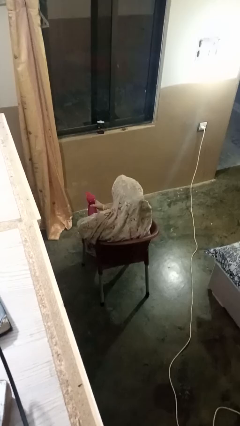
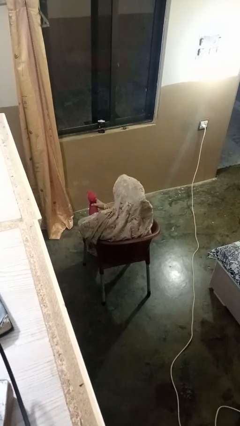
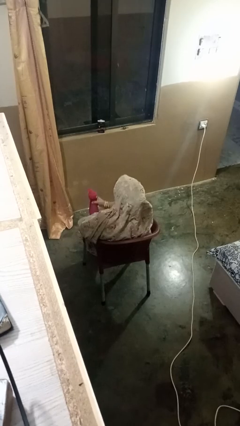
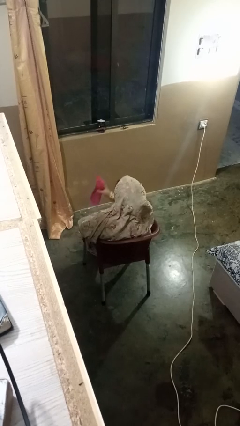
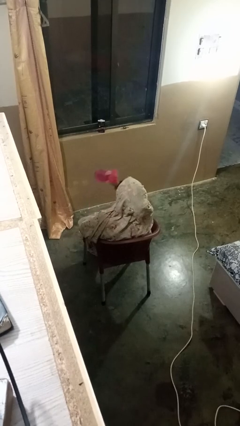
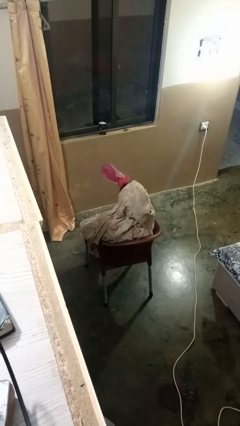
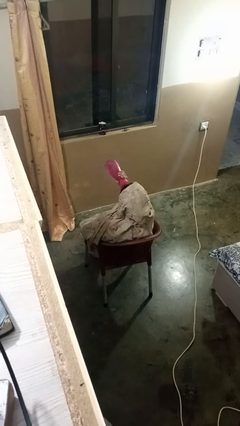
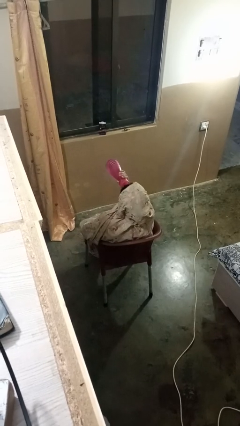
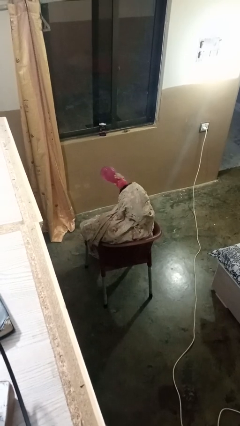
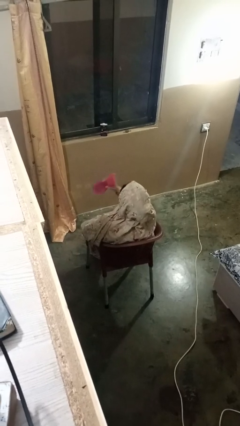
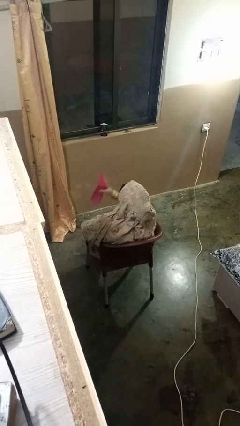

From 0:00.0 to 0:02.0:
person drinks from bottle

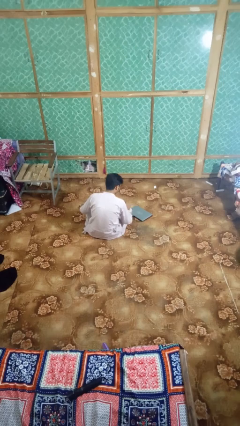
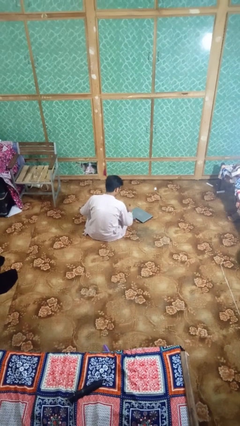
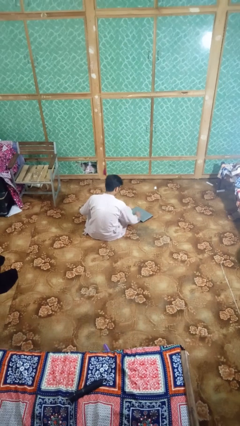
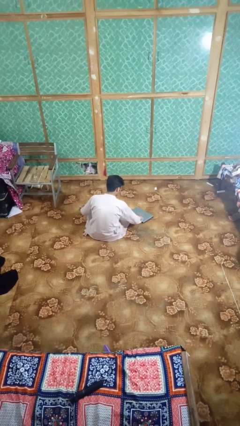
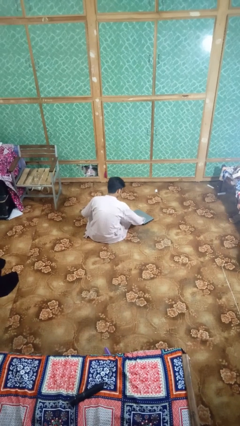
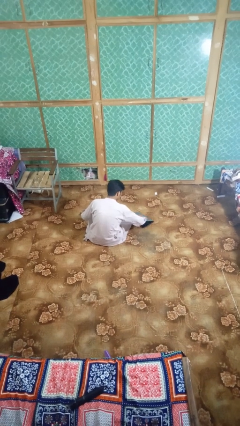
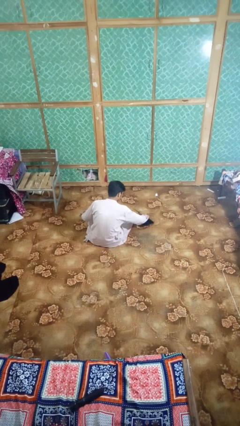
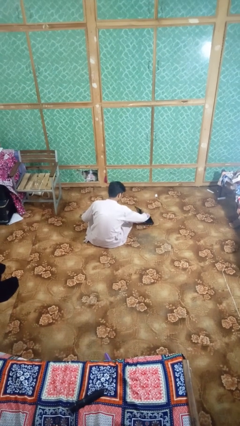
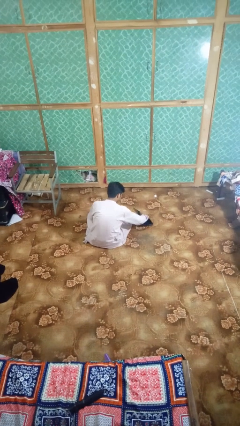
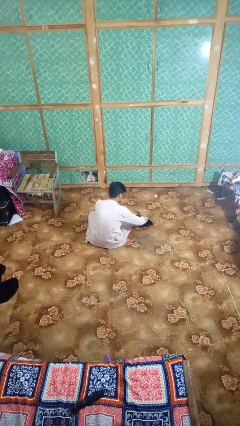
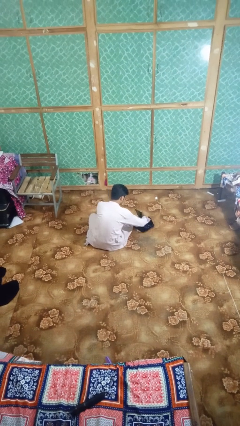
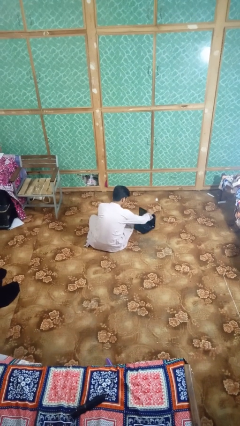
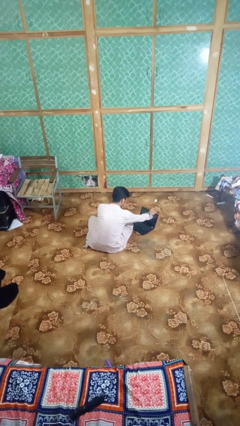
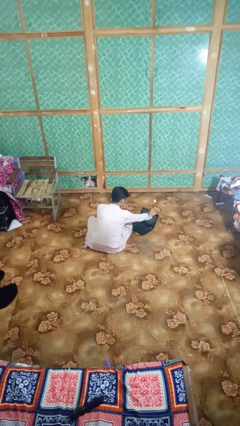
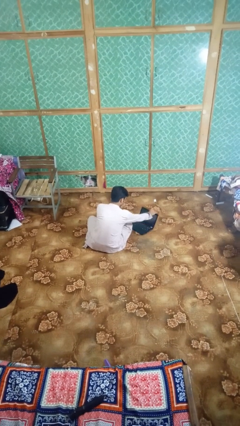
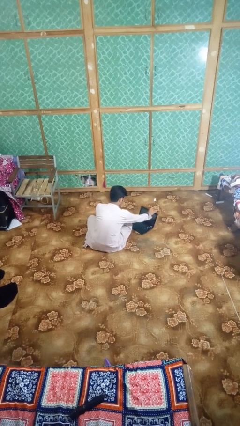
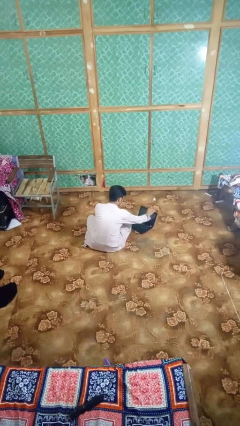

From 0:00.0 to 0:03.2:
person opens laptop

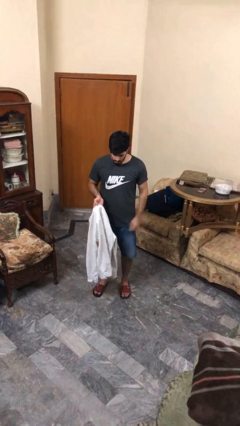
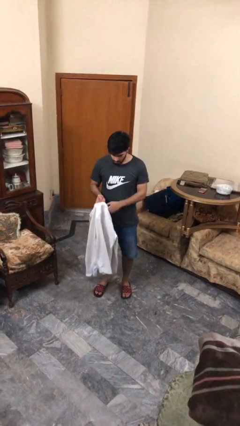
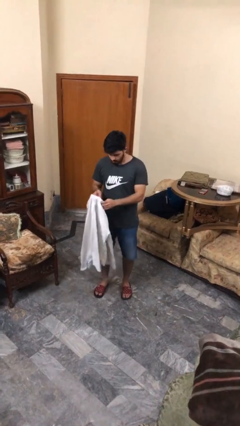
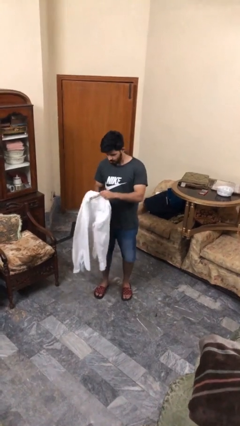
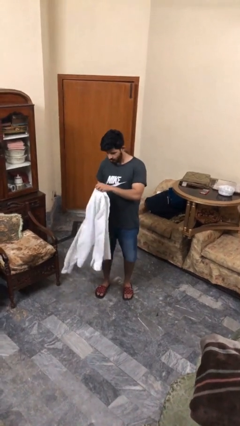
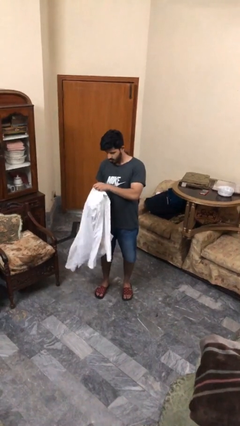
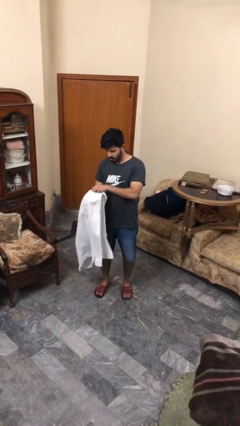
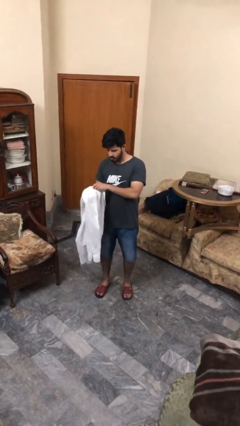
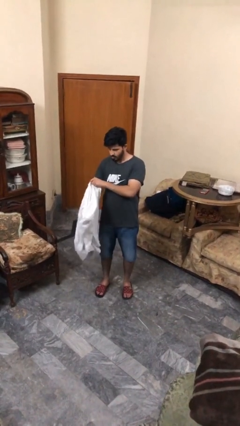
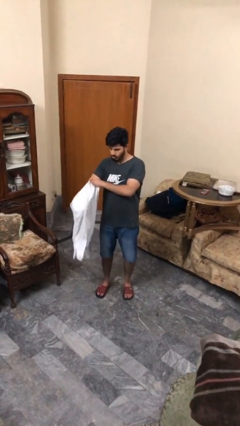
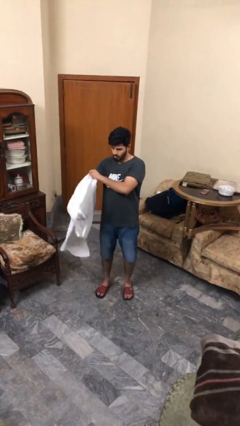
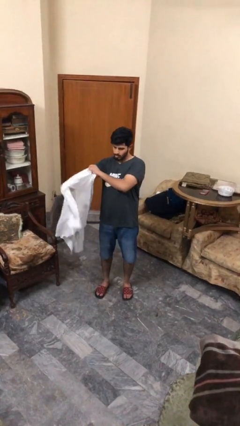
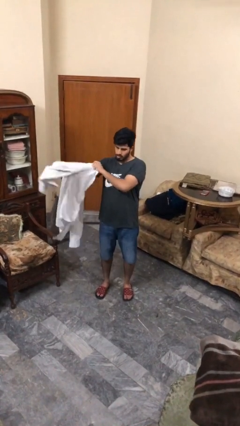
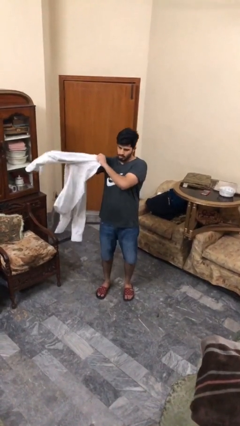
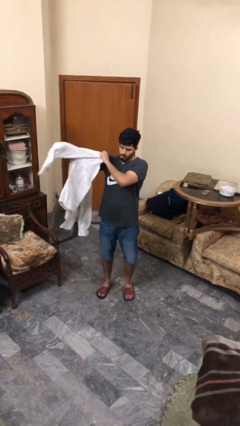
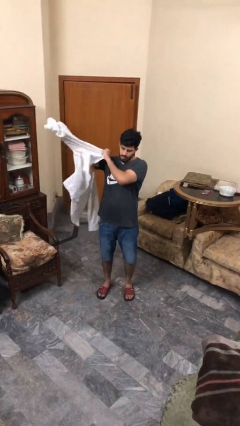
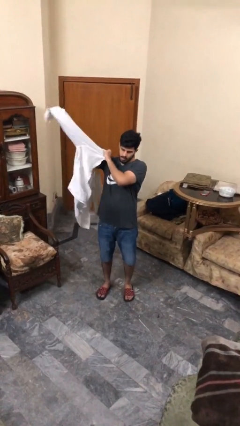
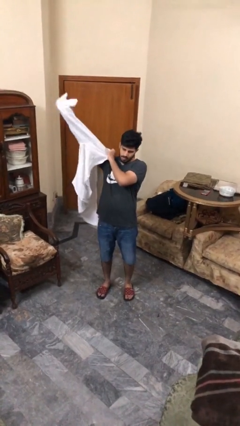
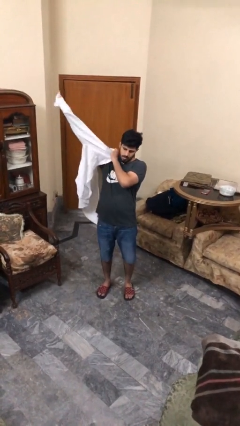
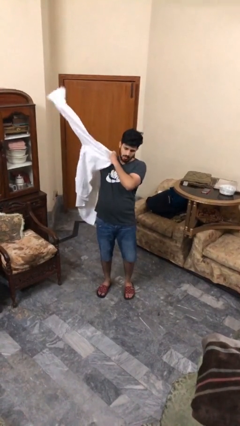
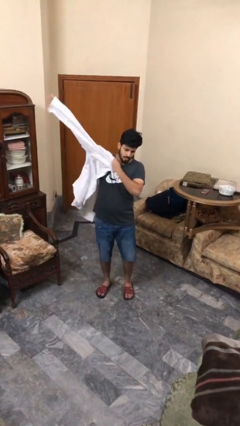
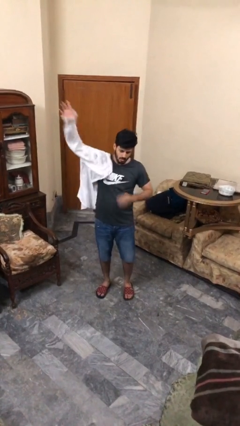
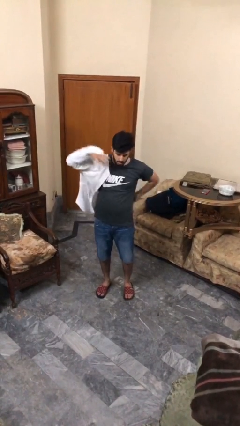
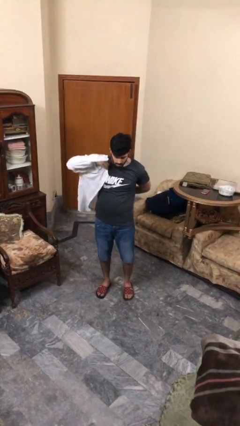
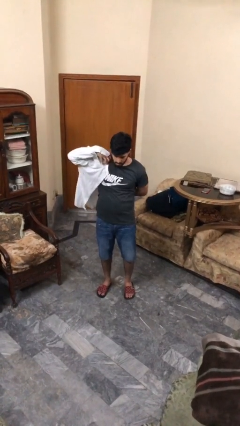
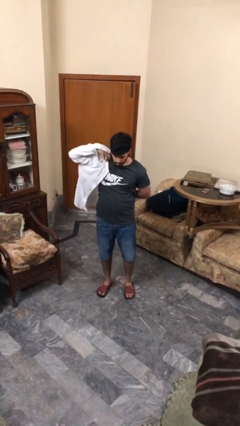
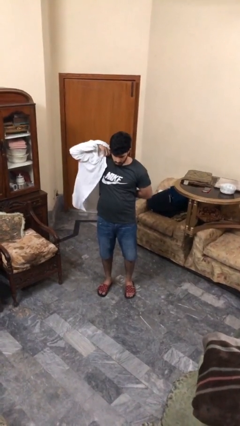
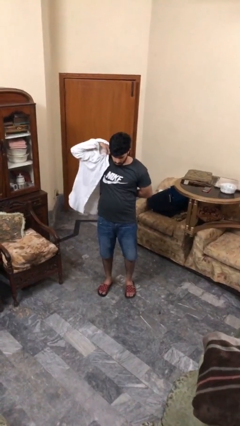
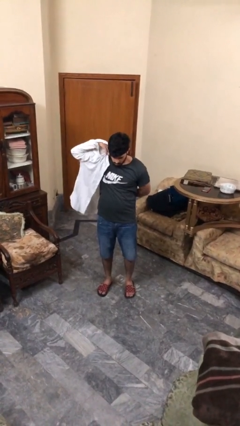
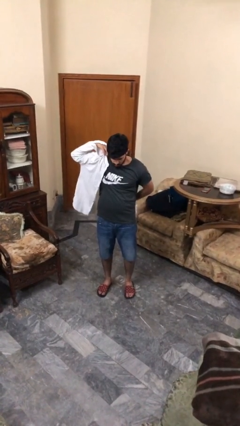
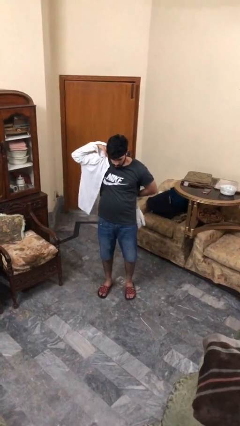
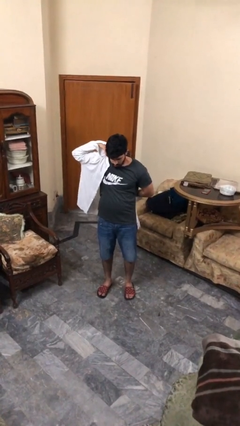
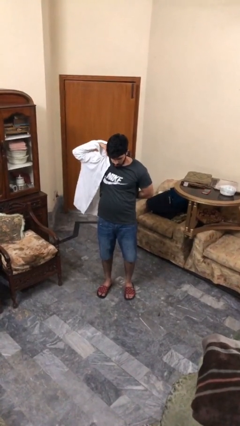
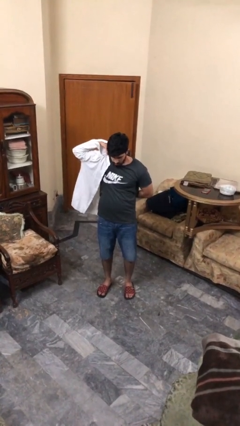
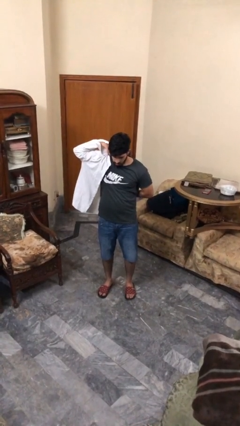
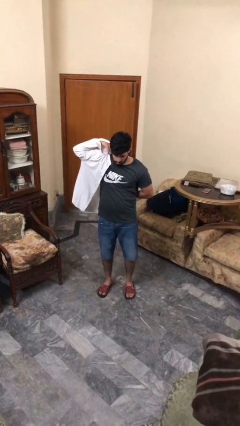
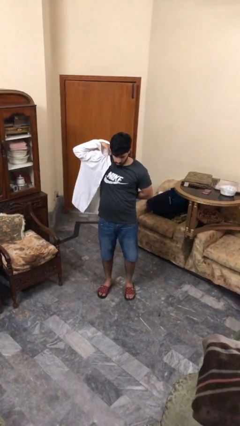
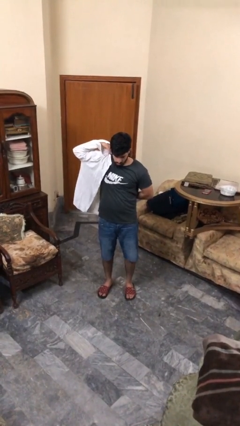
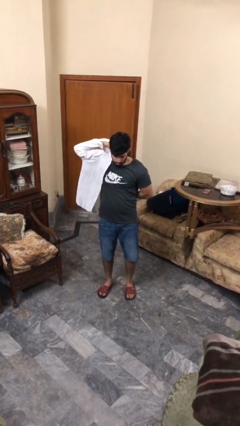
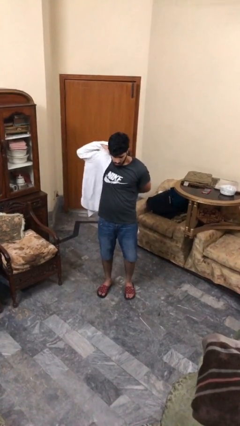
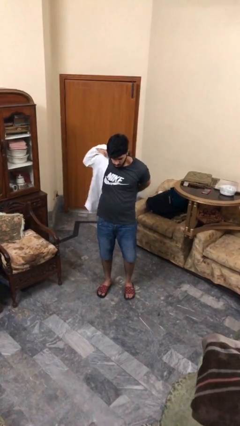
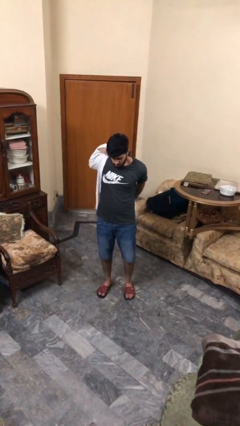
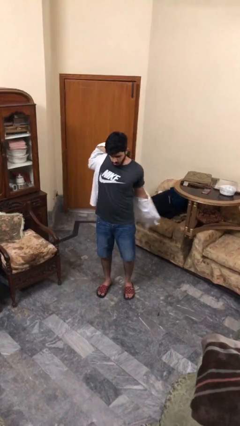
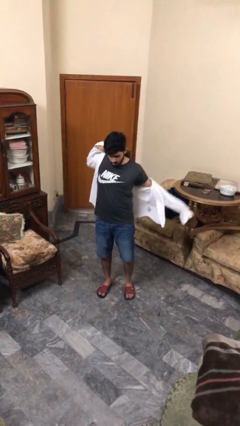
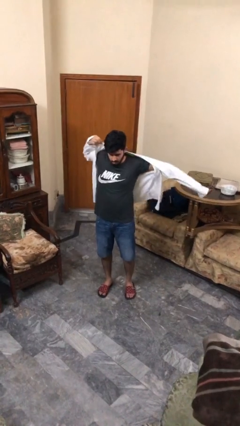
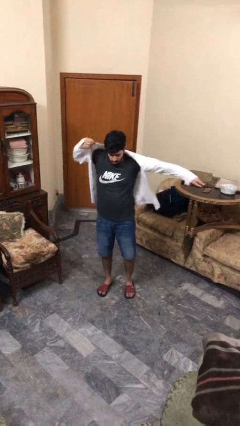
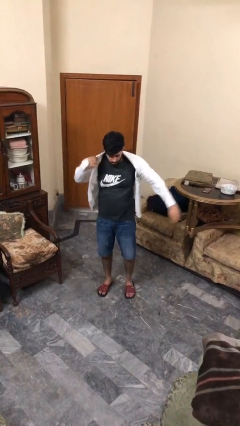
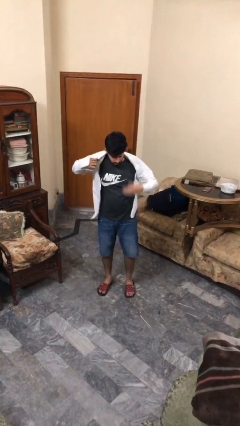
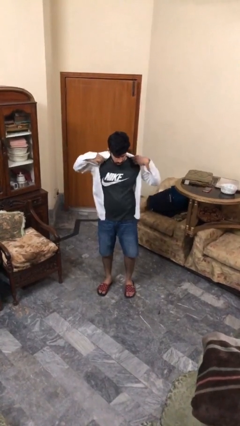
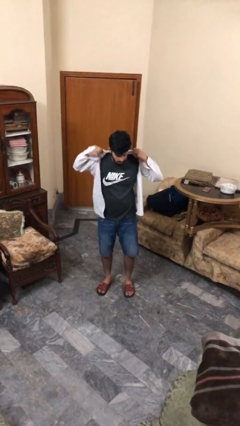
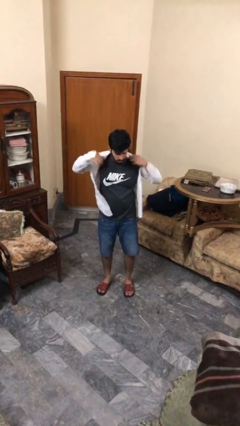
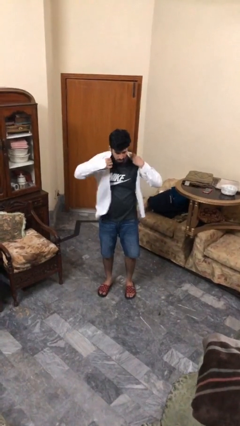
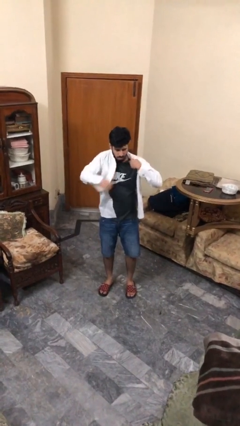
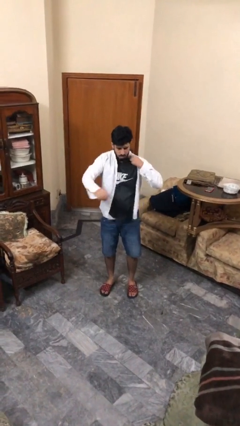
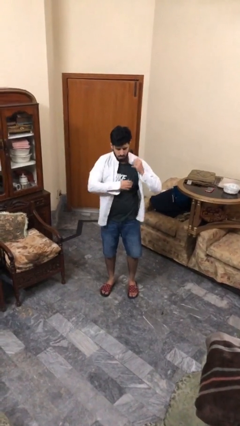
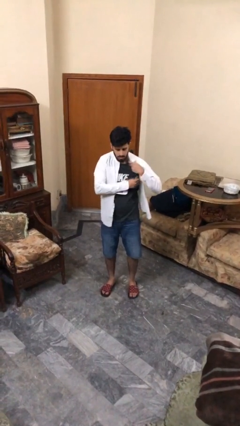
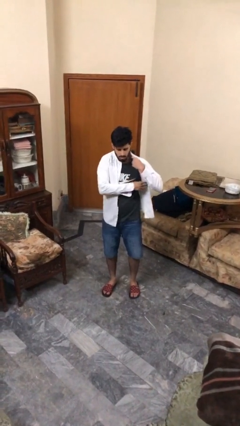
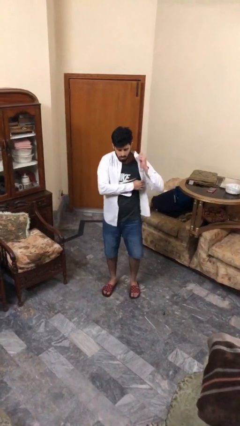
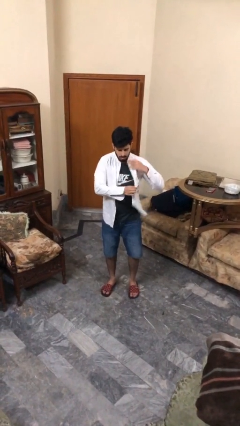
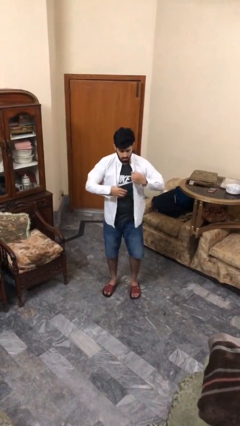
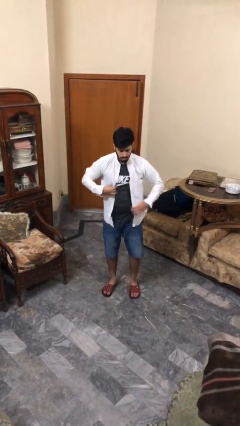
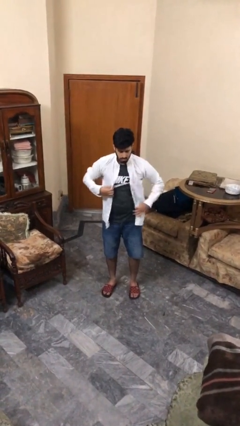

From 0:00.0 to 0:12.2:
person puts on shirt

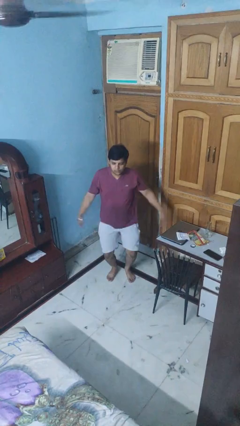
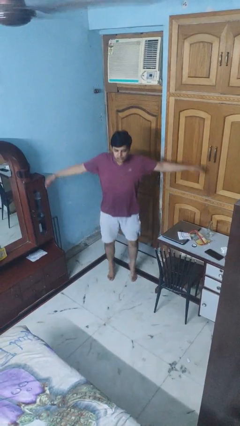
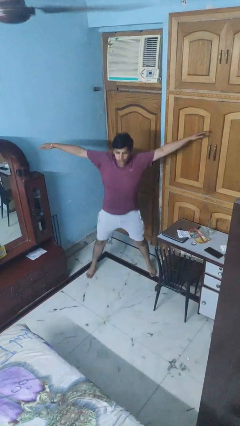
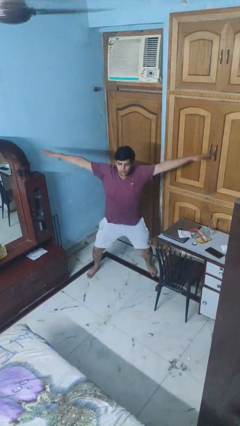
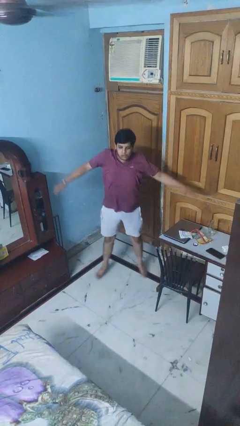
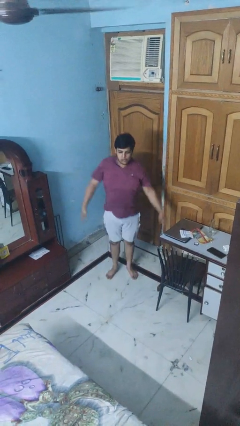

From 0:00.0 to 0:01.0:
person exercises with jumping jacks
